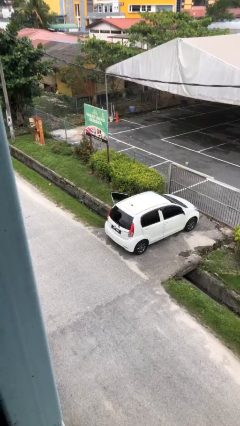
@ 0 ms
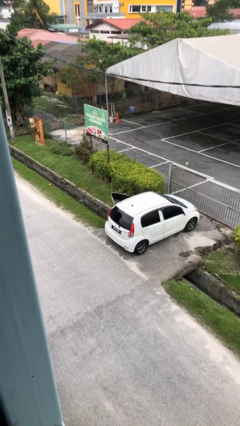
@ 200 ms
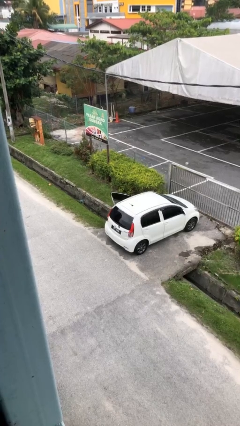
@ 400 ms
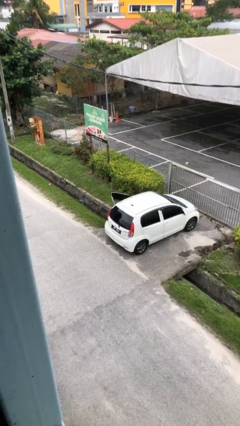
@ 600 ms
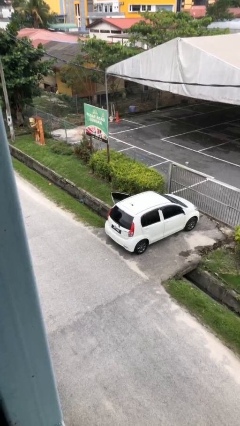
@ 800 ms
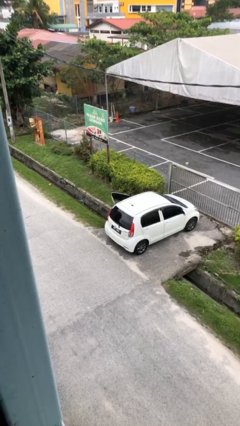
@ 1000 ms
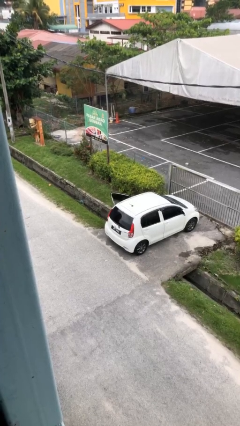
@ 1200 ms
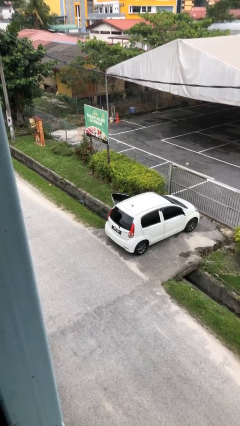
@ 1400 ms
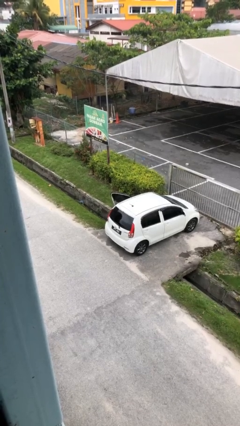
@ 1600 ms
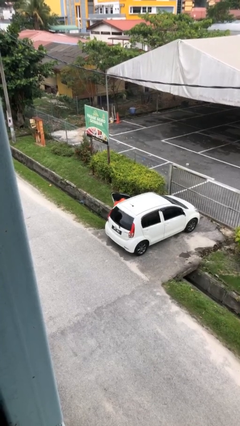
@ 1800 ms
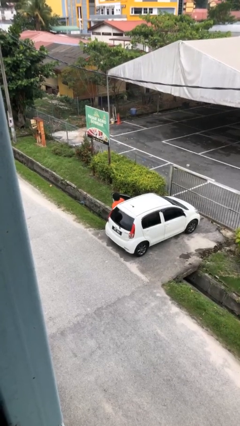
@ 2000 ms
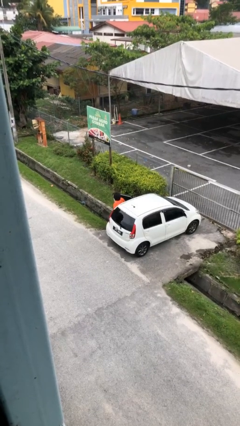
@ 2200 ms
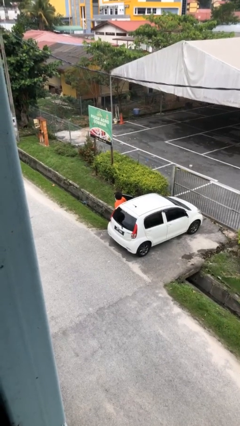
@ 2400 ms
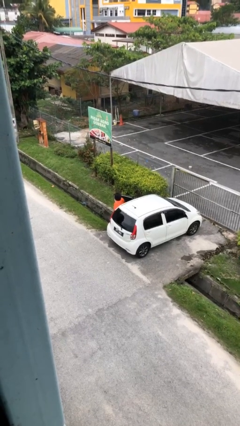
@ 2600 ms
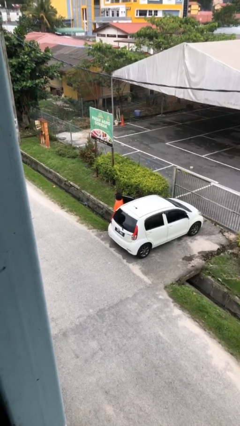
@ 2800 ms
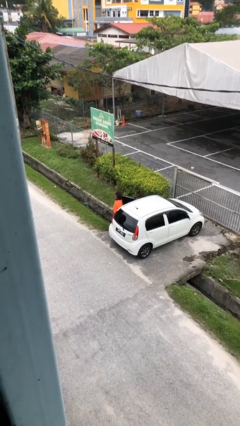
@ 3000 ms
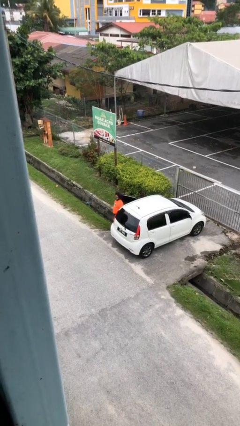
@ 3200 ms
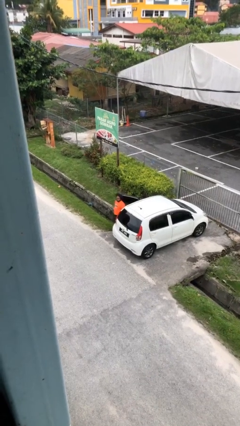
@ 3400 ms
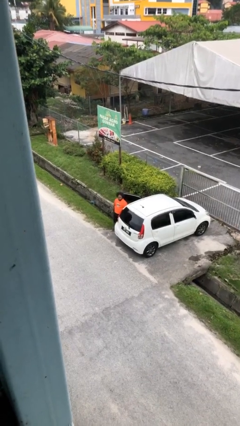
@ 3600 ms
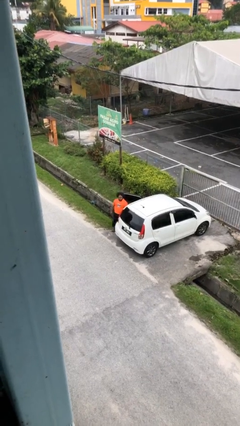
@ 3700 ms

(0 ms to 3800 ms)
person exits car

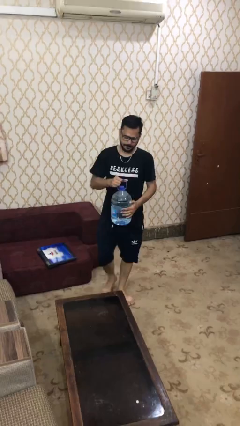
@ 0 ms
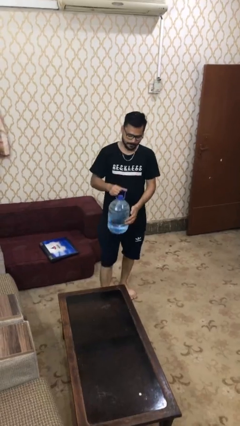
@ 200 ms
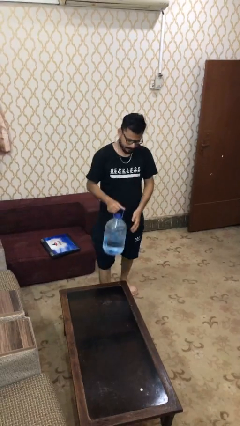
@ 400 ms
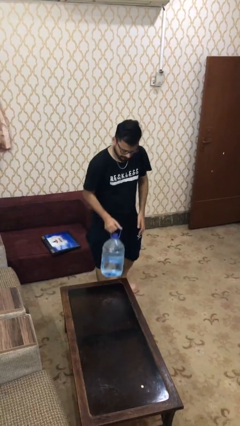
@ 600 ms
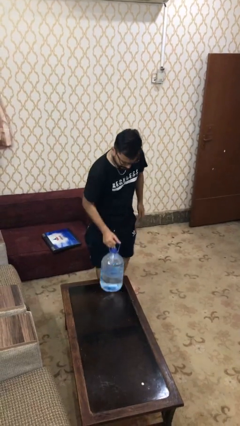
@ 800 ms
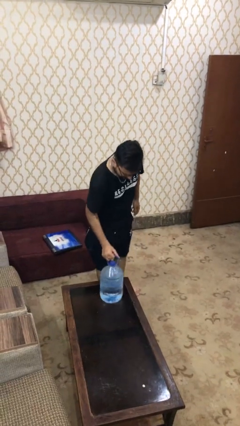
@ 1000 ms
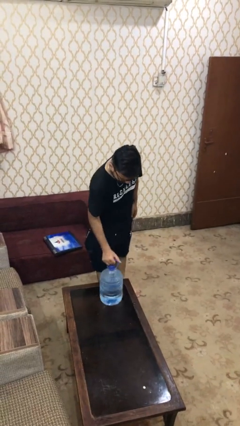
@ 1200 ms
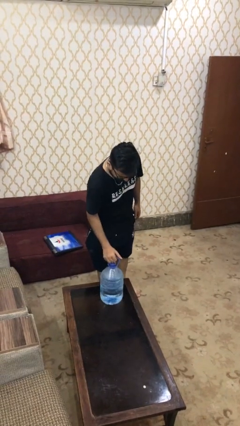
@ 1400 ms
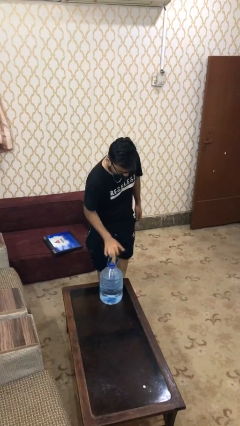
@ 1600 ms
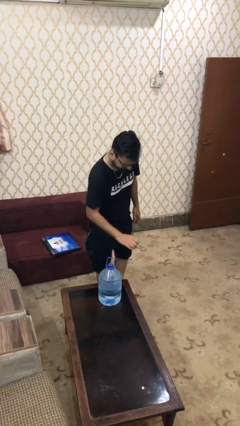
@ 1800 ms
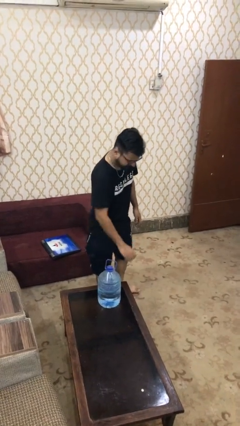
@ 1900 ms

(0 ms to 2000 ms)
person puts down object on table

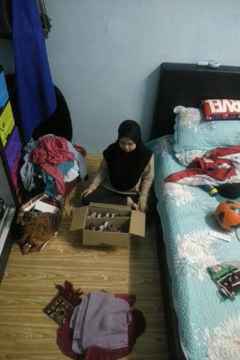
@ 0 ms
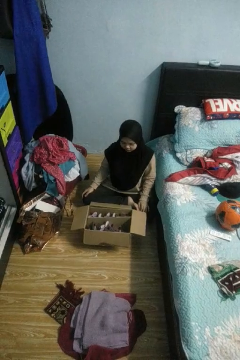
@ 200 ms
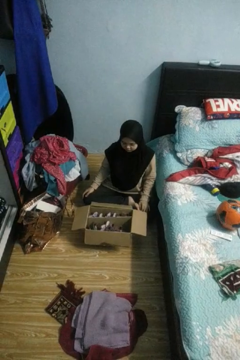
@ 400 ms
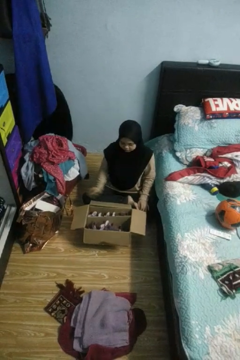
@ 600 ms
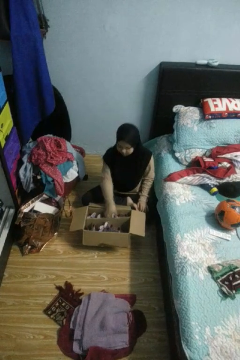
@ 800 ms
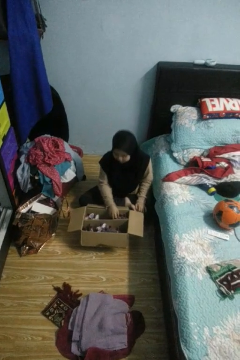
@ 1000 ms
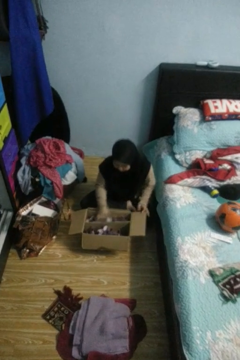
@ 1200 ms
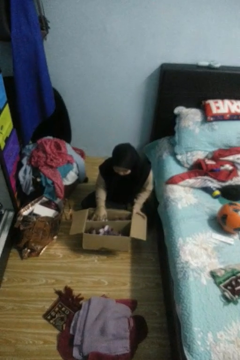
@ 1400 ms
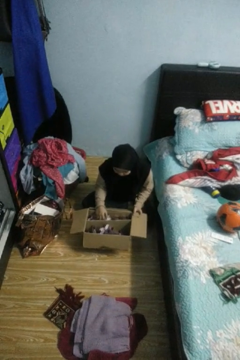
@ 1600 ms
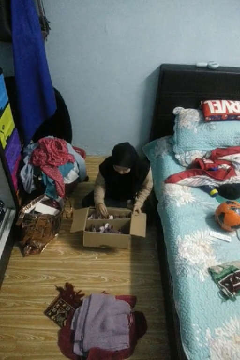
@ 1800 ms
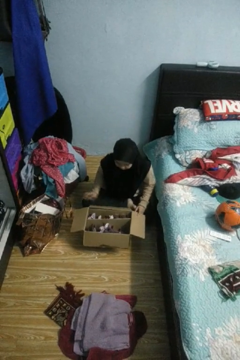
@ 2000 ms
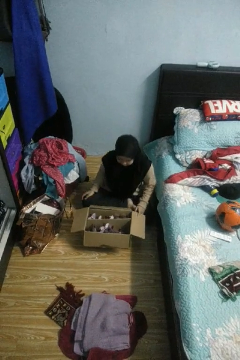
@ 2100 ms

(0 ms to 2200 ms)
person searches in box

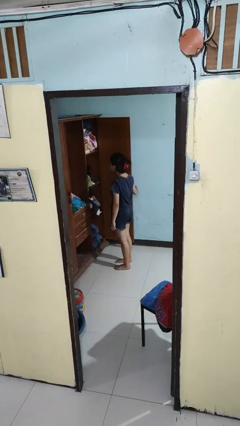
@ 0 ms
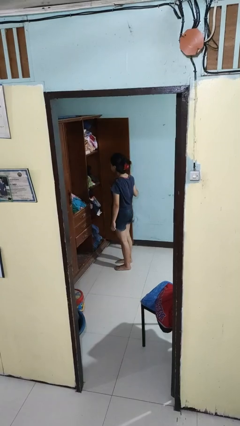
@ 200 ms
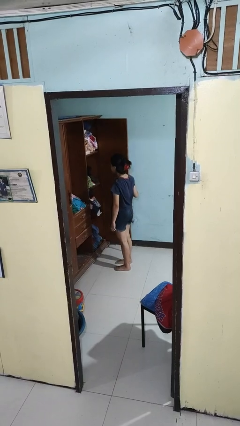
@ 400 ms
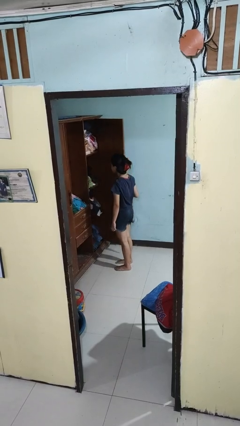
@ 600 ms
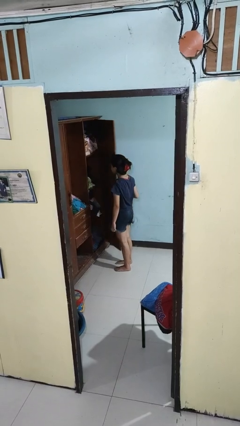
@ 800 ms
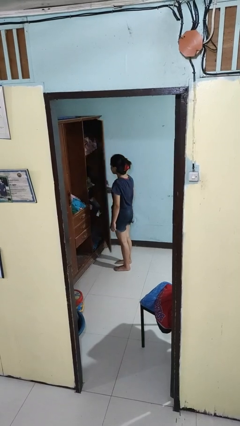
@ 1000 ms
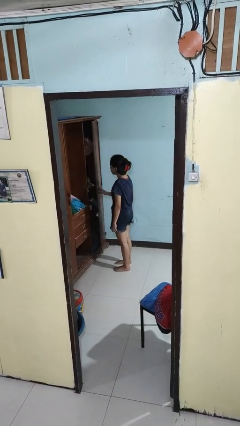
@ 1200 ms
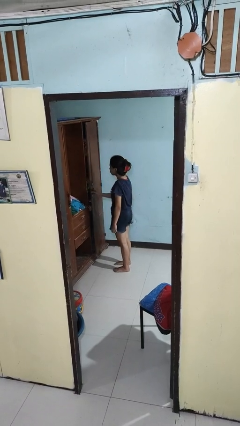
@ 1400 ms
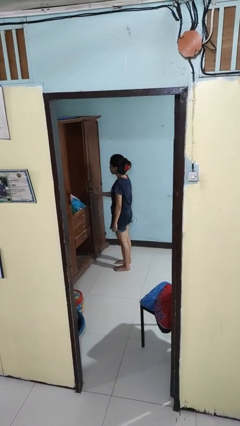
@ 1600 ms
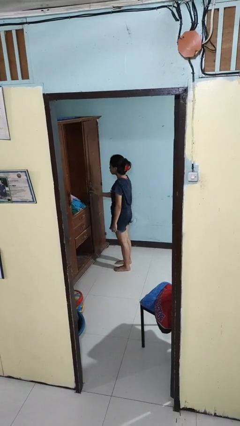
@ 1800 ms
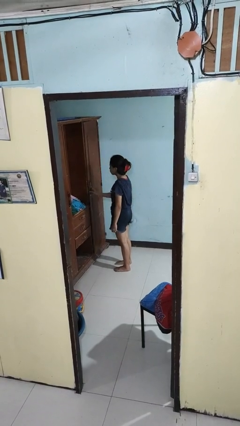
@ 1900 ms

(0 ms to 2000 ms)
person closes closet door

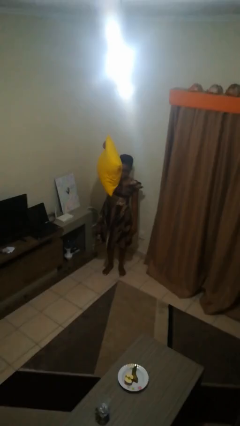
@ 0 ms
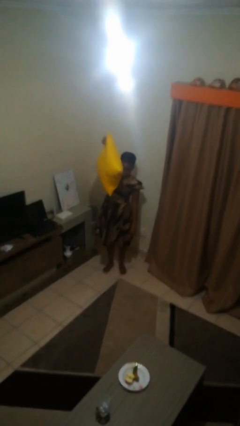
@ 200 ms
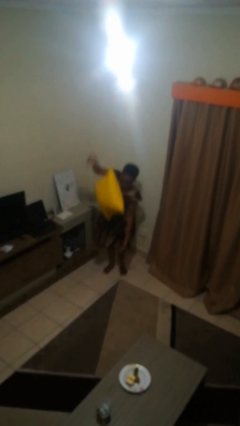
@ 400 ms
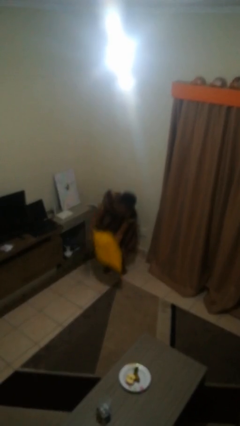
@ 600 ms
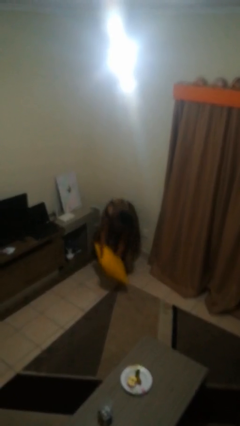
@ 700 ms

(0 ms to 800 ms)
person drops object

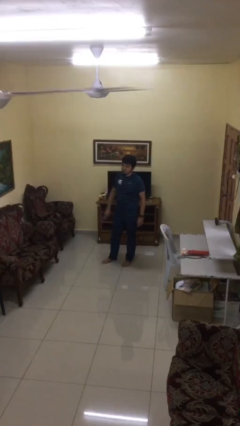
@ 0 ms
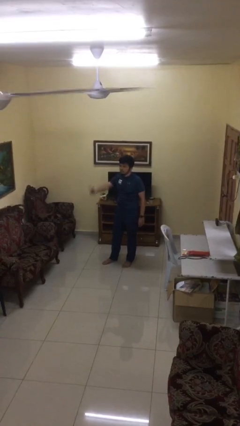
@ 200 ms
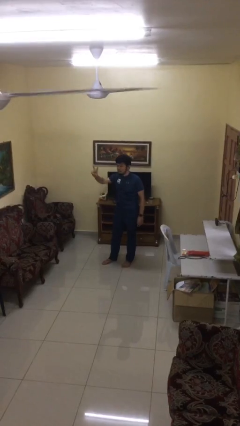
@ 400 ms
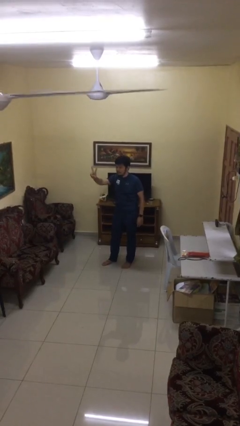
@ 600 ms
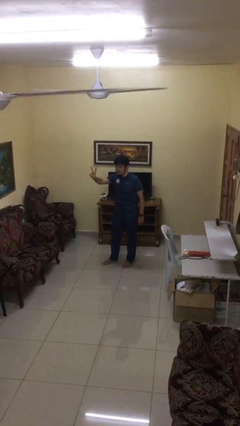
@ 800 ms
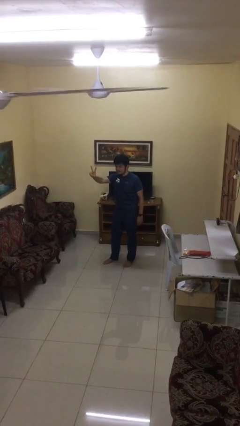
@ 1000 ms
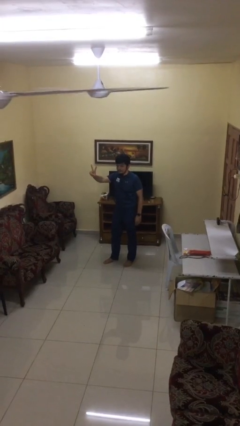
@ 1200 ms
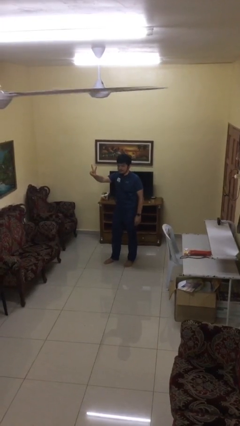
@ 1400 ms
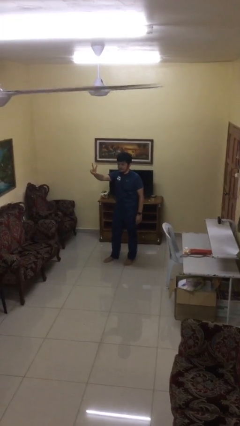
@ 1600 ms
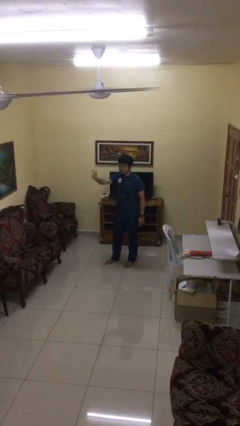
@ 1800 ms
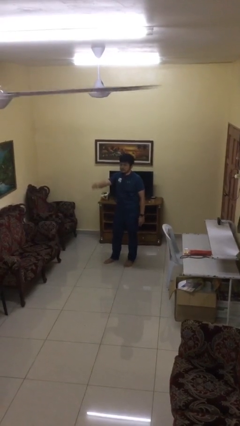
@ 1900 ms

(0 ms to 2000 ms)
person gestures peace

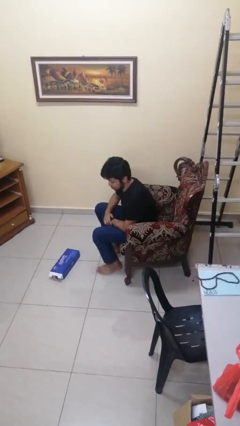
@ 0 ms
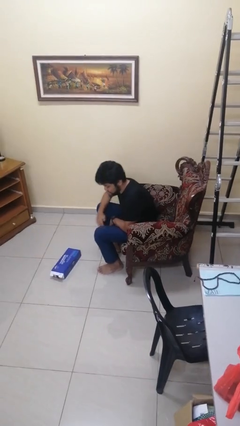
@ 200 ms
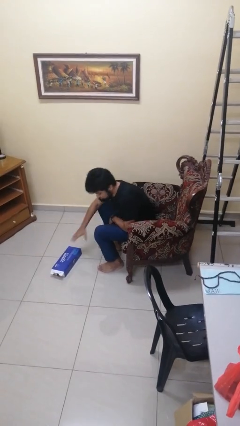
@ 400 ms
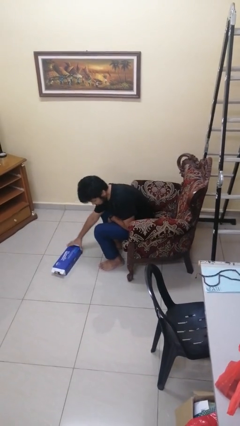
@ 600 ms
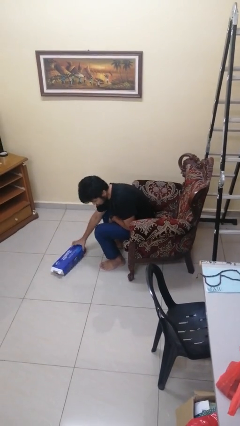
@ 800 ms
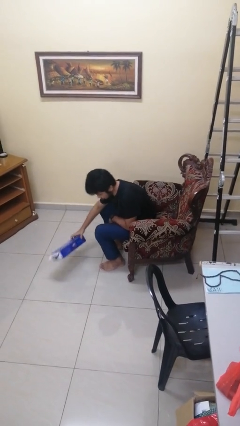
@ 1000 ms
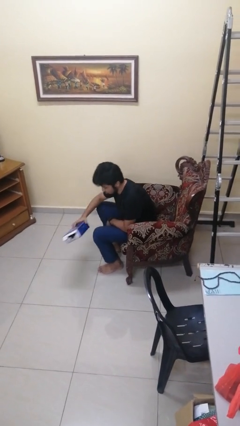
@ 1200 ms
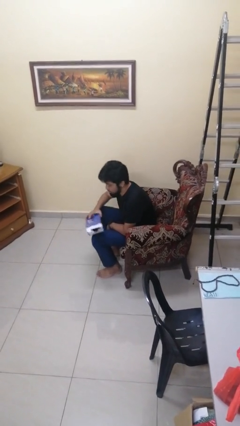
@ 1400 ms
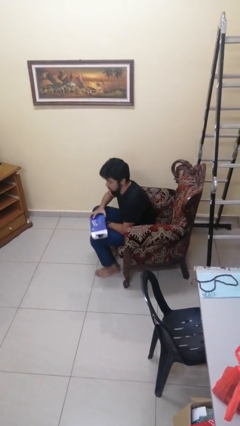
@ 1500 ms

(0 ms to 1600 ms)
person picks up object from floor

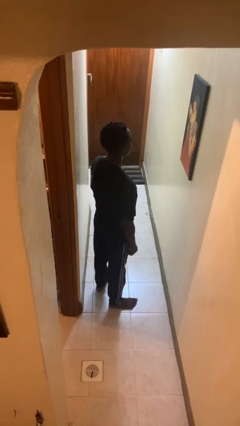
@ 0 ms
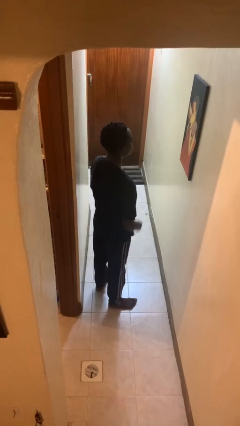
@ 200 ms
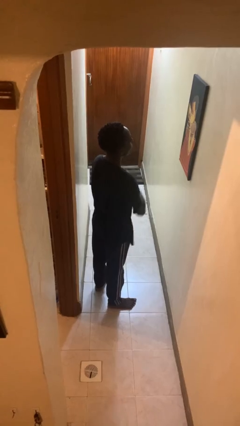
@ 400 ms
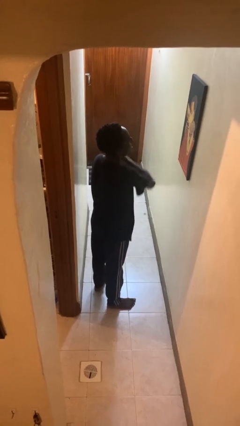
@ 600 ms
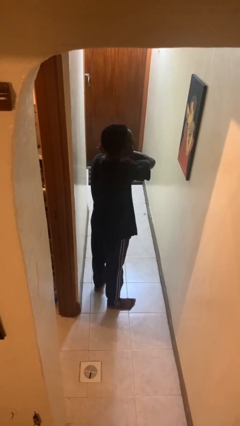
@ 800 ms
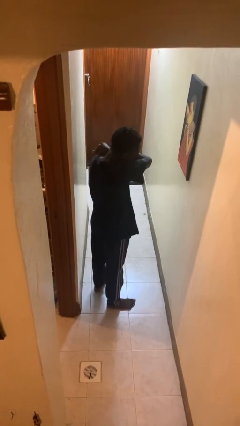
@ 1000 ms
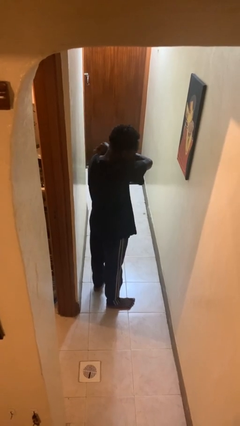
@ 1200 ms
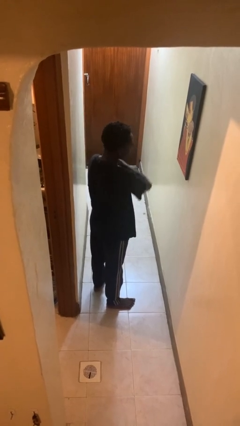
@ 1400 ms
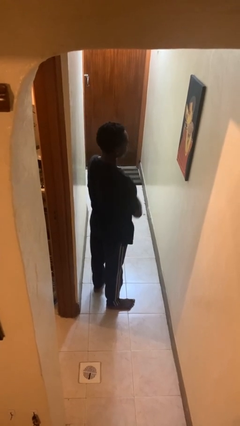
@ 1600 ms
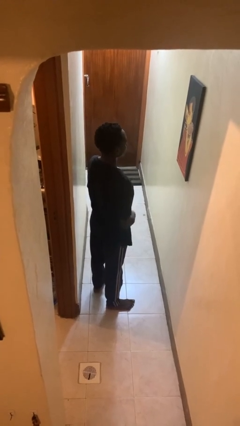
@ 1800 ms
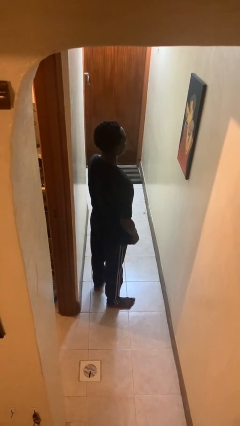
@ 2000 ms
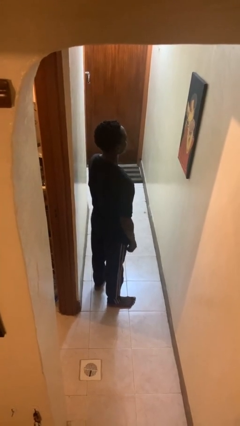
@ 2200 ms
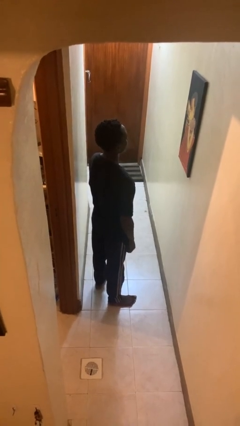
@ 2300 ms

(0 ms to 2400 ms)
person sneezes into arm
